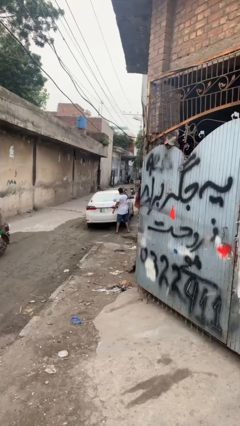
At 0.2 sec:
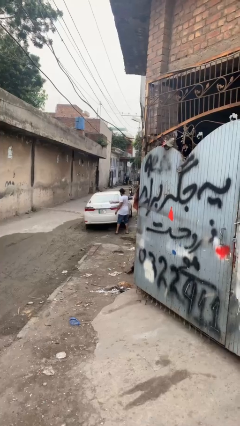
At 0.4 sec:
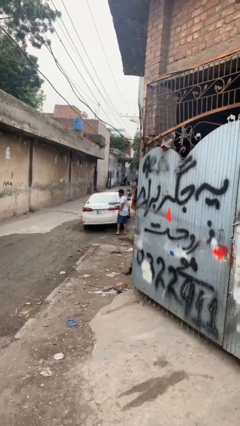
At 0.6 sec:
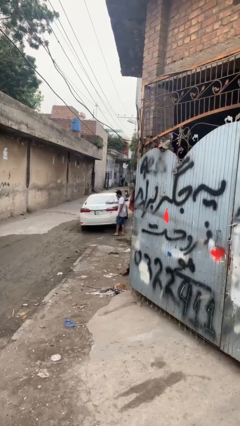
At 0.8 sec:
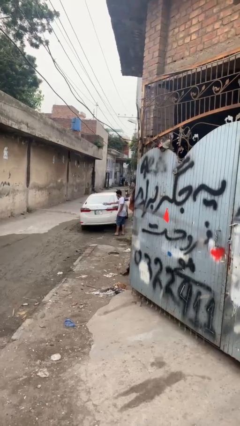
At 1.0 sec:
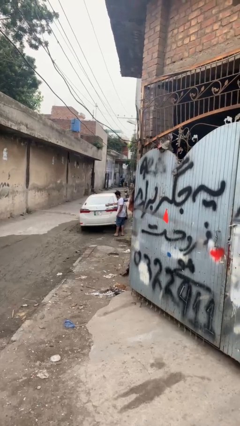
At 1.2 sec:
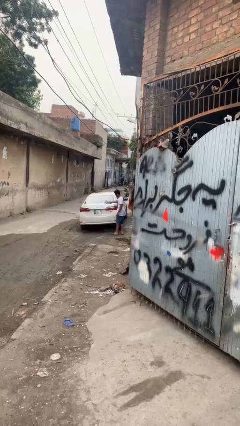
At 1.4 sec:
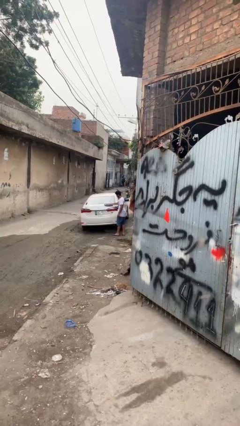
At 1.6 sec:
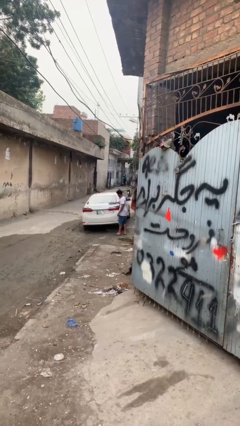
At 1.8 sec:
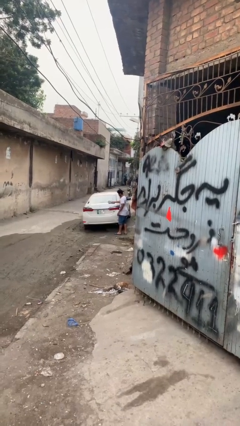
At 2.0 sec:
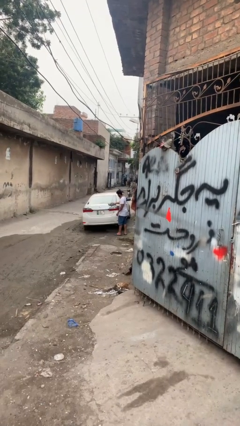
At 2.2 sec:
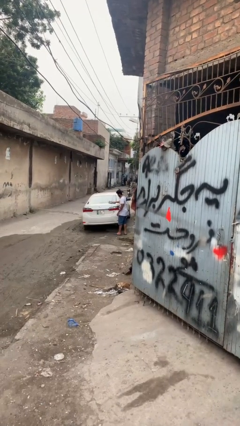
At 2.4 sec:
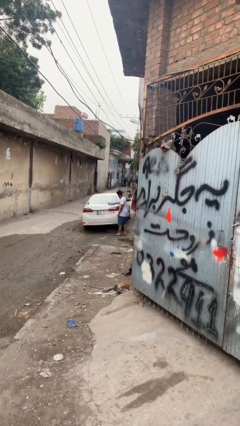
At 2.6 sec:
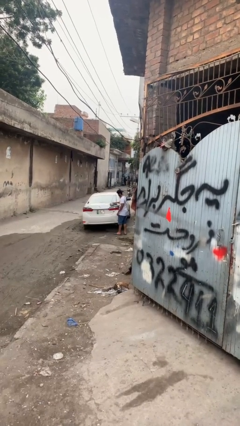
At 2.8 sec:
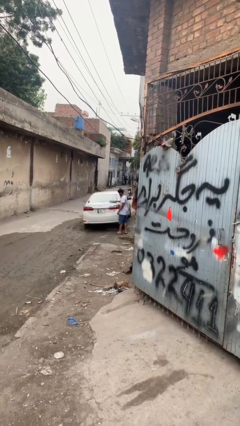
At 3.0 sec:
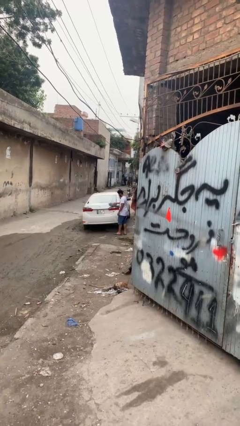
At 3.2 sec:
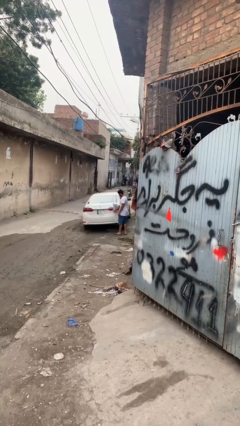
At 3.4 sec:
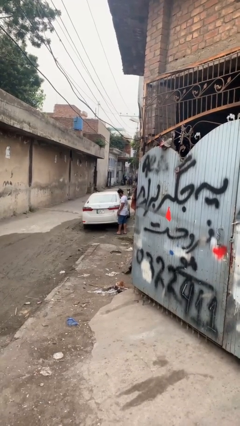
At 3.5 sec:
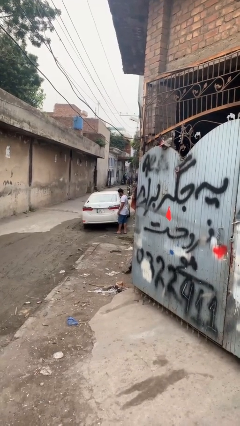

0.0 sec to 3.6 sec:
person polishes car with rag

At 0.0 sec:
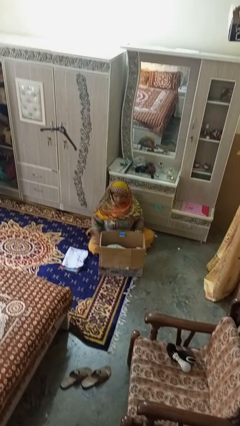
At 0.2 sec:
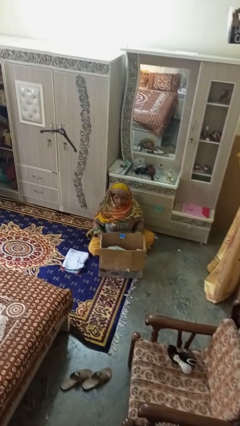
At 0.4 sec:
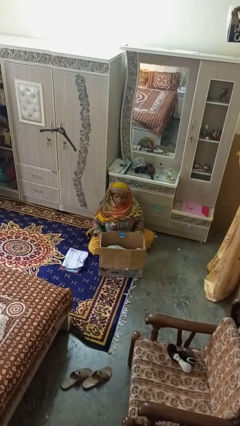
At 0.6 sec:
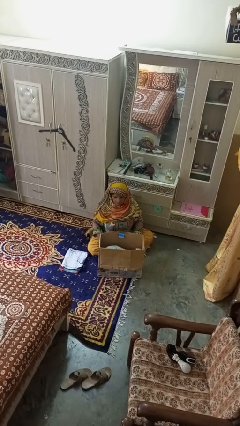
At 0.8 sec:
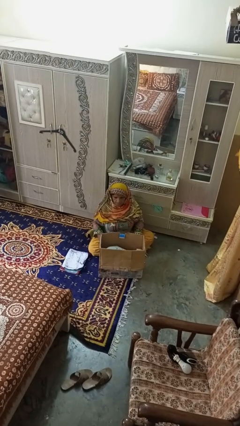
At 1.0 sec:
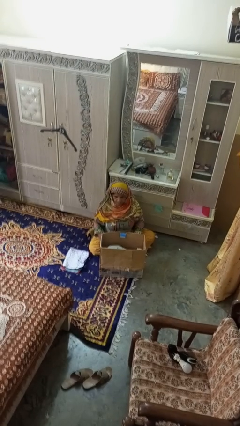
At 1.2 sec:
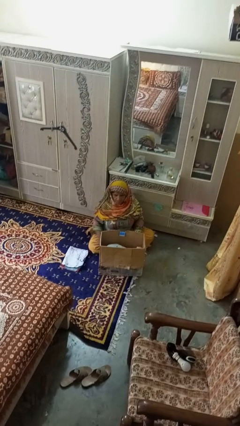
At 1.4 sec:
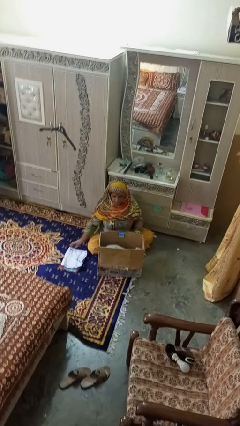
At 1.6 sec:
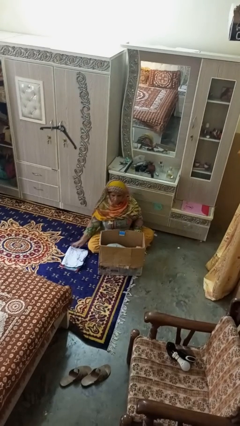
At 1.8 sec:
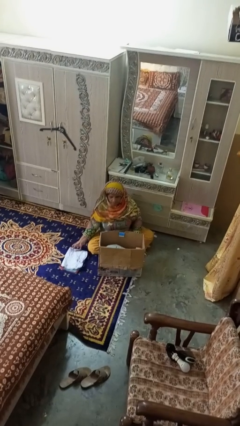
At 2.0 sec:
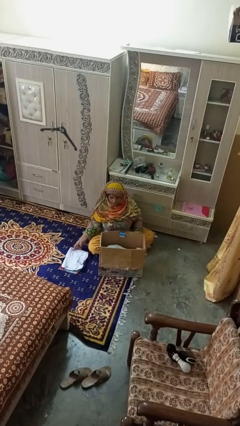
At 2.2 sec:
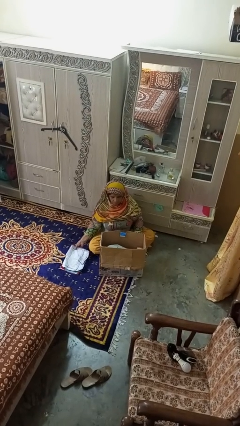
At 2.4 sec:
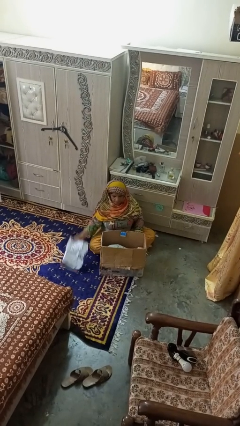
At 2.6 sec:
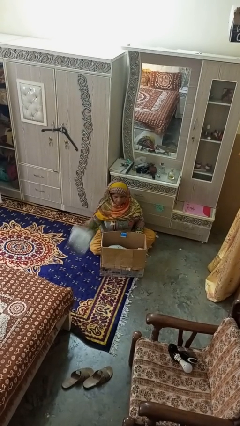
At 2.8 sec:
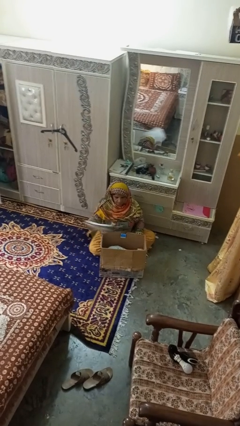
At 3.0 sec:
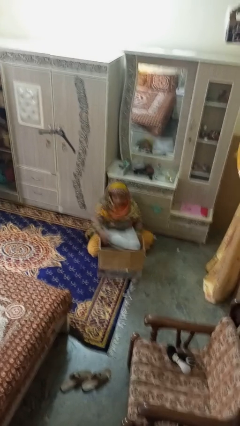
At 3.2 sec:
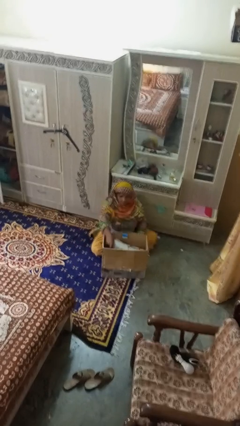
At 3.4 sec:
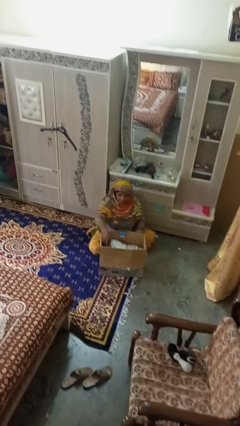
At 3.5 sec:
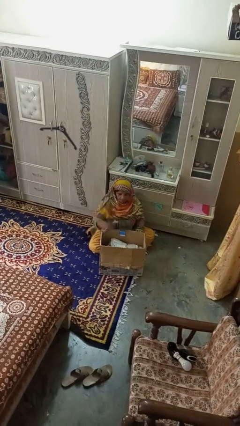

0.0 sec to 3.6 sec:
person puts object into box

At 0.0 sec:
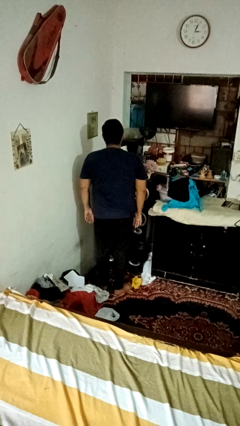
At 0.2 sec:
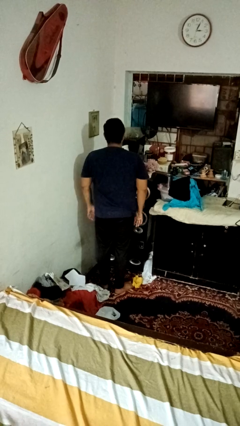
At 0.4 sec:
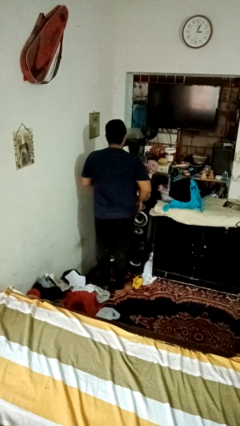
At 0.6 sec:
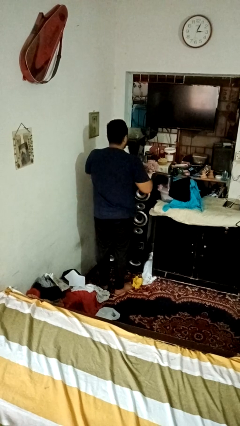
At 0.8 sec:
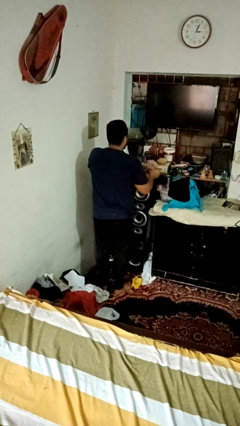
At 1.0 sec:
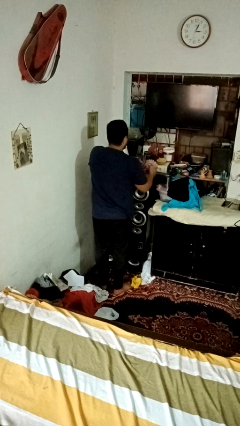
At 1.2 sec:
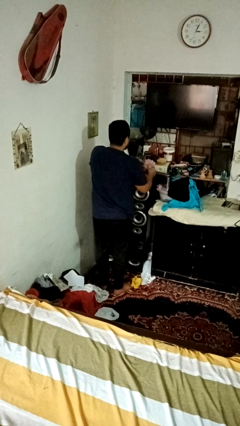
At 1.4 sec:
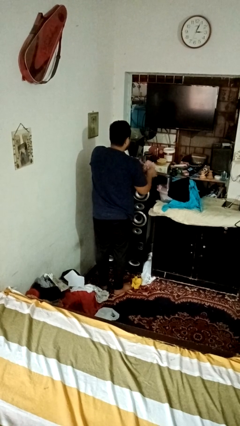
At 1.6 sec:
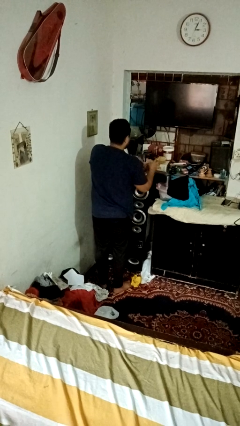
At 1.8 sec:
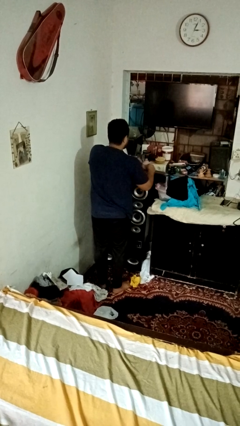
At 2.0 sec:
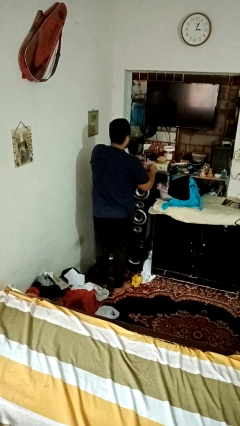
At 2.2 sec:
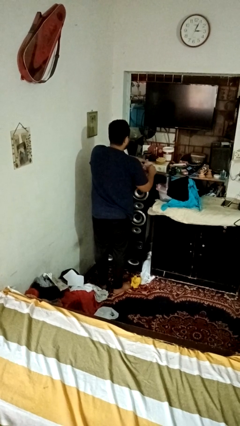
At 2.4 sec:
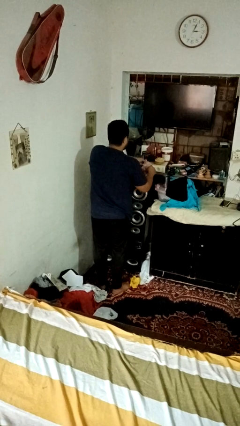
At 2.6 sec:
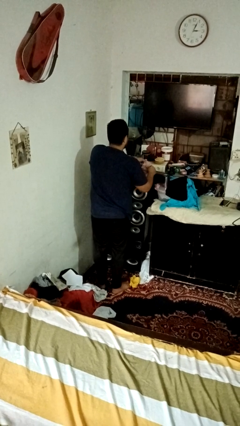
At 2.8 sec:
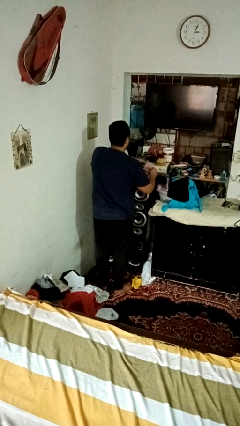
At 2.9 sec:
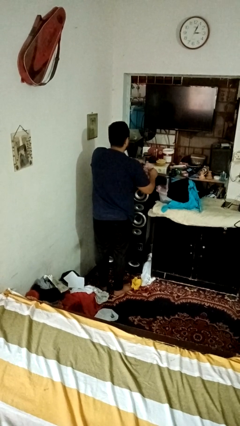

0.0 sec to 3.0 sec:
person arranges flowers in vase

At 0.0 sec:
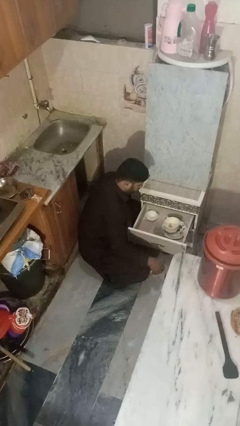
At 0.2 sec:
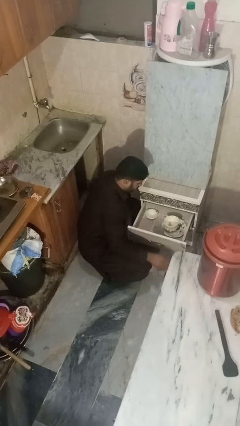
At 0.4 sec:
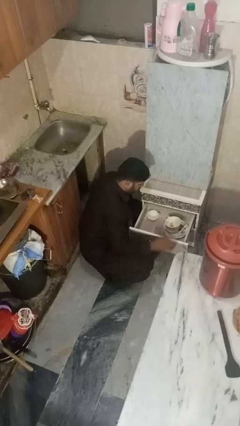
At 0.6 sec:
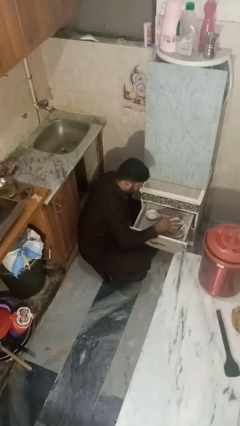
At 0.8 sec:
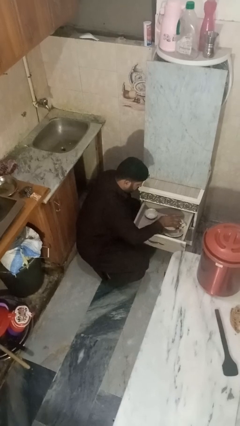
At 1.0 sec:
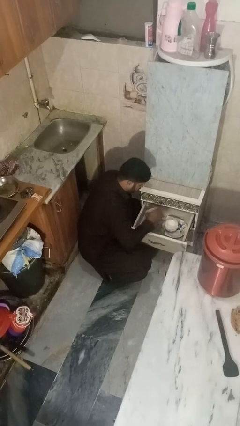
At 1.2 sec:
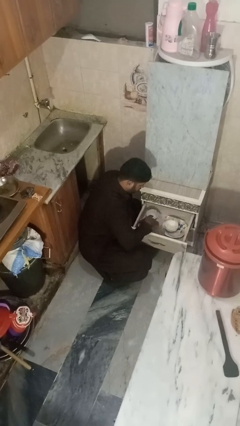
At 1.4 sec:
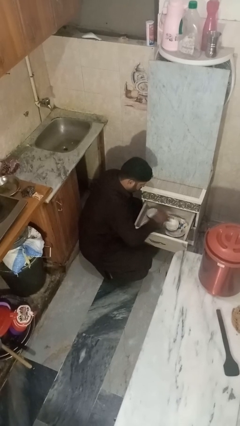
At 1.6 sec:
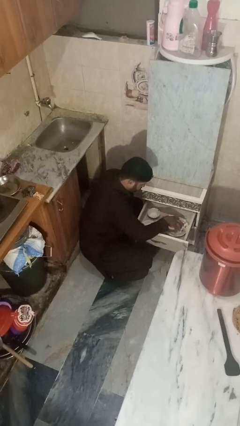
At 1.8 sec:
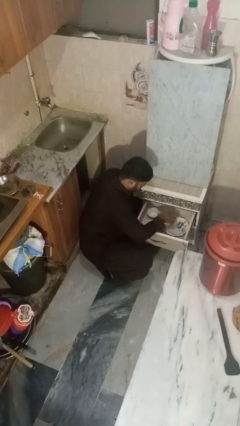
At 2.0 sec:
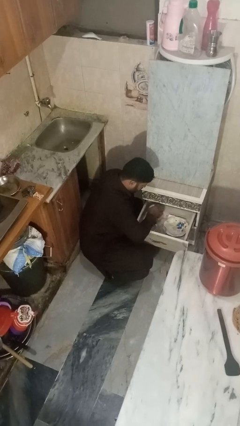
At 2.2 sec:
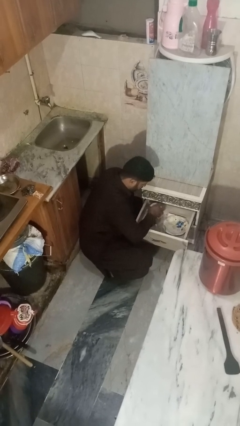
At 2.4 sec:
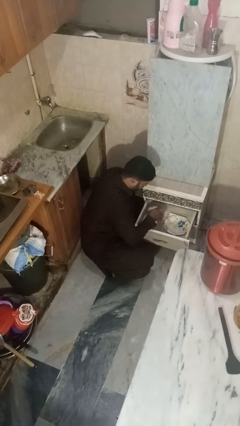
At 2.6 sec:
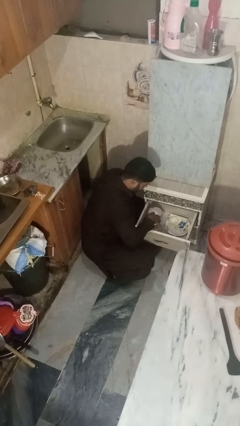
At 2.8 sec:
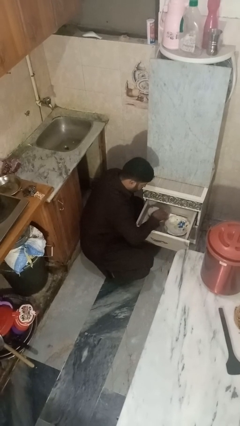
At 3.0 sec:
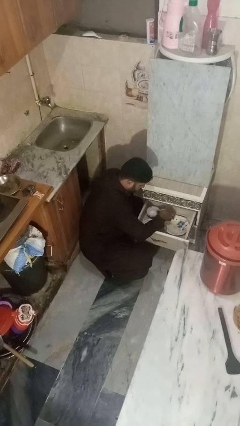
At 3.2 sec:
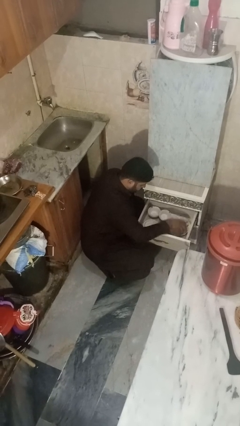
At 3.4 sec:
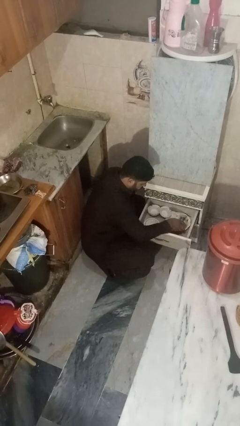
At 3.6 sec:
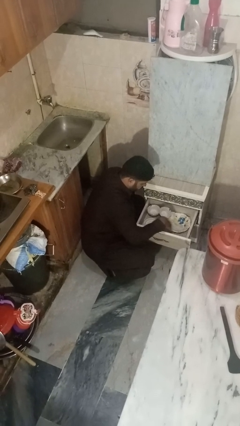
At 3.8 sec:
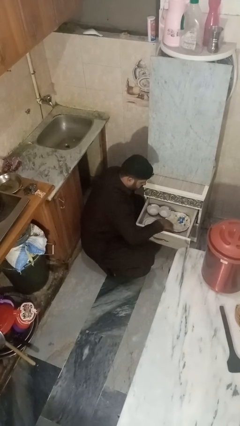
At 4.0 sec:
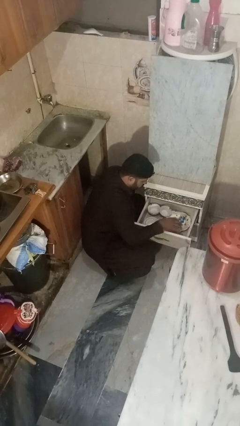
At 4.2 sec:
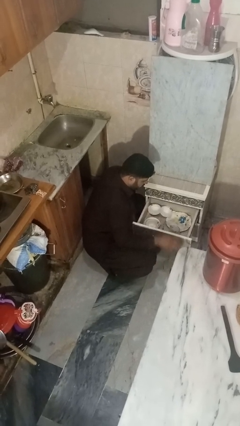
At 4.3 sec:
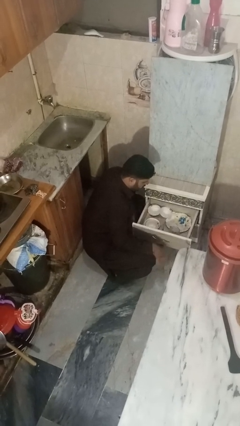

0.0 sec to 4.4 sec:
person searches in kitchen drawer

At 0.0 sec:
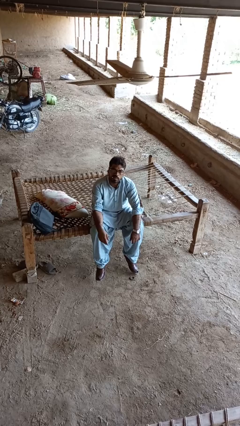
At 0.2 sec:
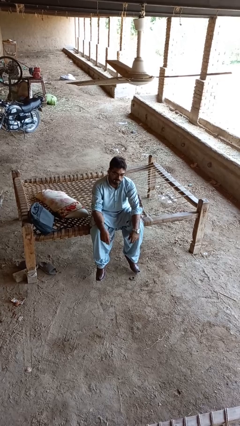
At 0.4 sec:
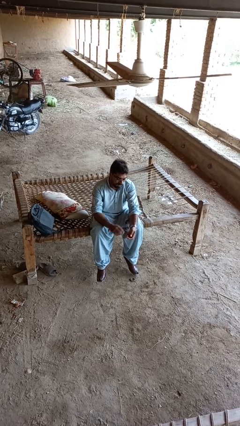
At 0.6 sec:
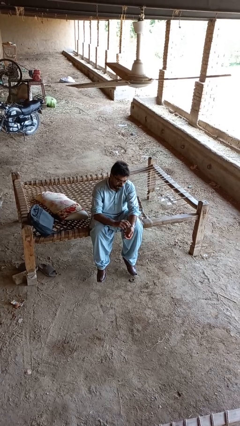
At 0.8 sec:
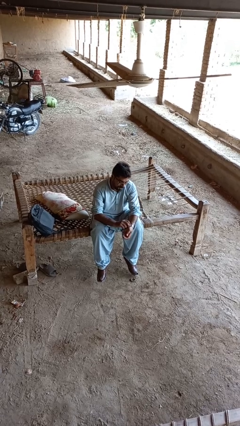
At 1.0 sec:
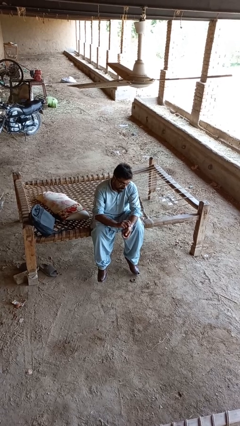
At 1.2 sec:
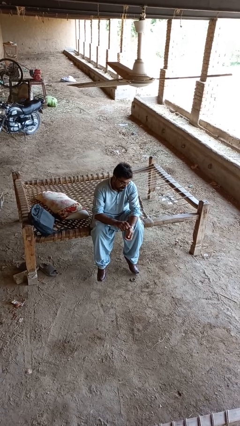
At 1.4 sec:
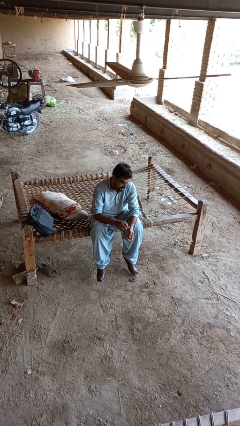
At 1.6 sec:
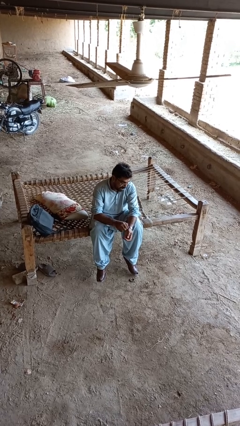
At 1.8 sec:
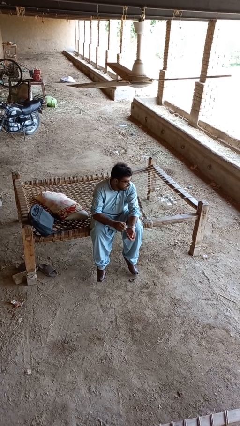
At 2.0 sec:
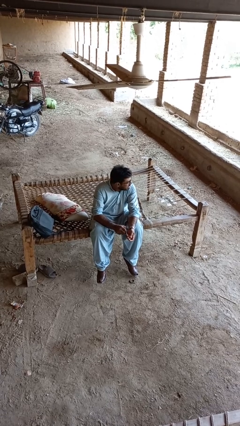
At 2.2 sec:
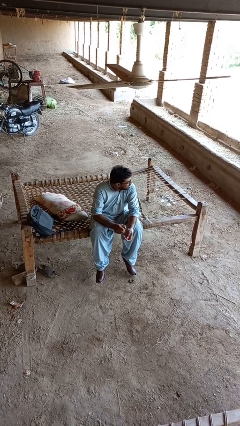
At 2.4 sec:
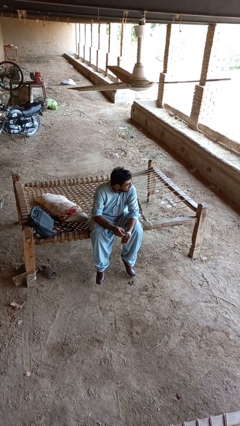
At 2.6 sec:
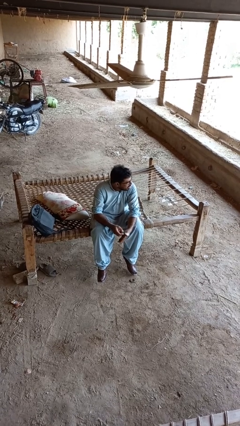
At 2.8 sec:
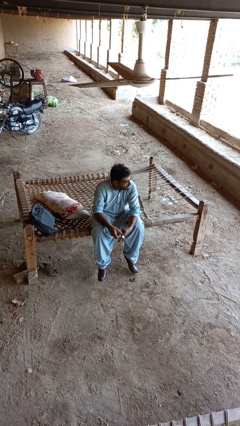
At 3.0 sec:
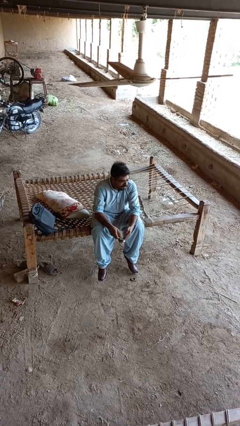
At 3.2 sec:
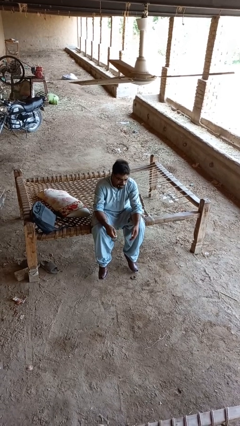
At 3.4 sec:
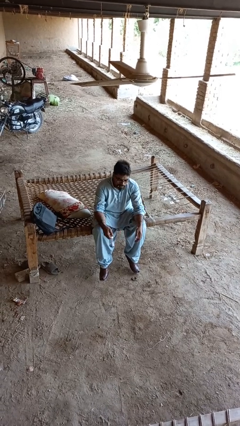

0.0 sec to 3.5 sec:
person takes off wristwatch
